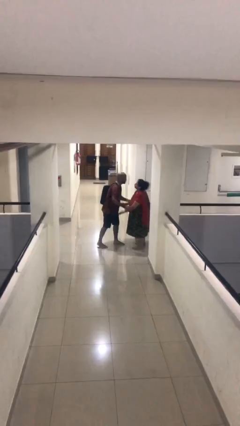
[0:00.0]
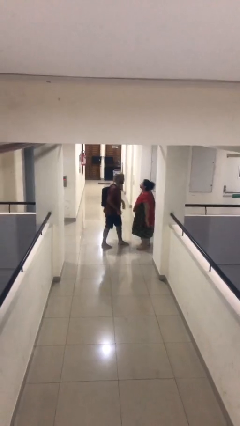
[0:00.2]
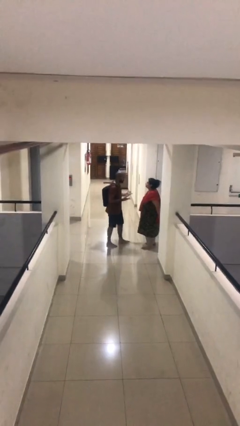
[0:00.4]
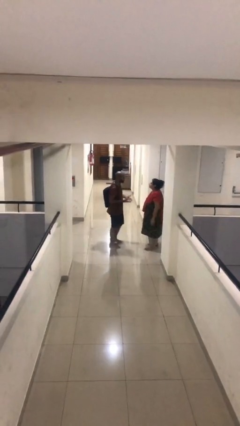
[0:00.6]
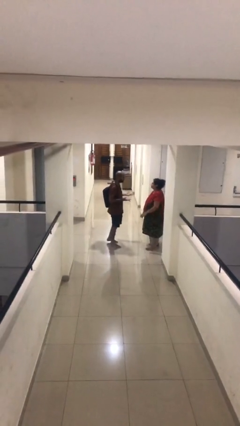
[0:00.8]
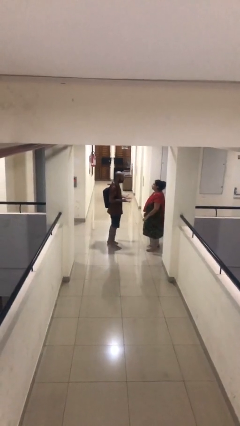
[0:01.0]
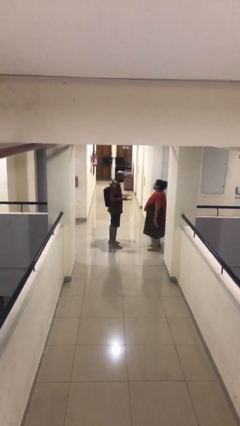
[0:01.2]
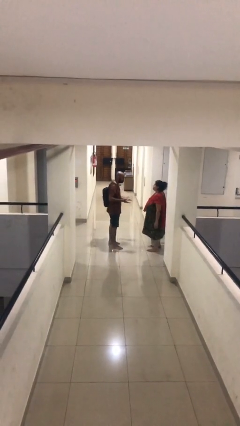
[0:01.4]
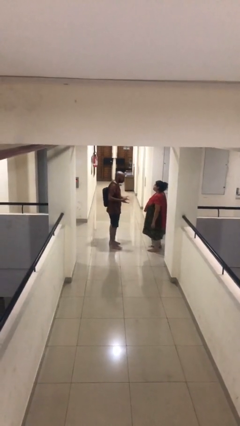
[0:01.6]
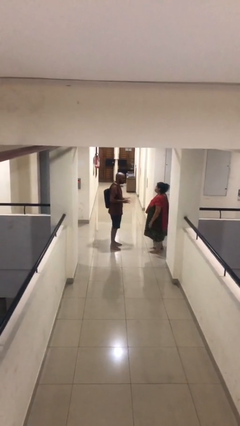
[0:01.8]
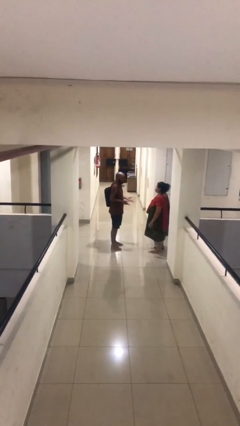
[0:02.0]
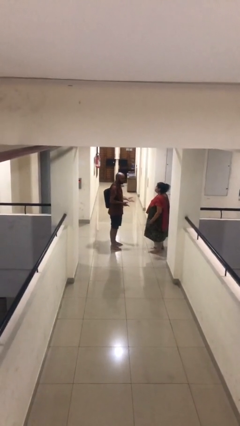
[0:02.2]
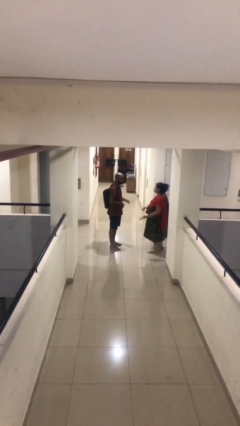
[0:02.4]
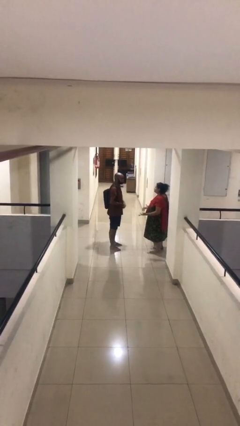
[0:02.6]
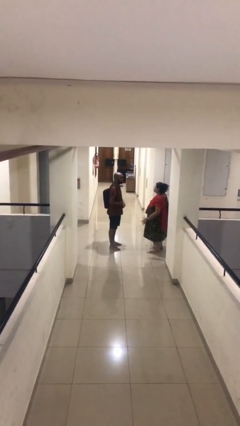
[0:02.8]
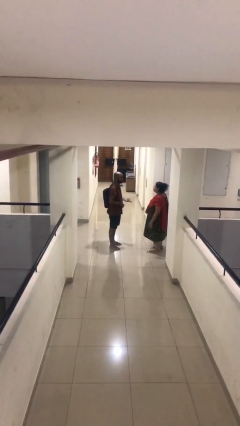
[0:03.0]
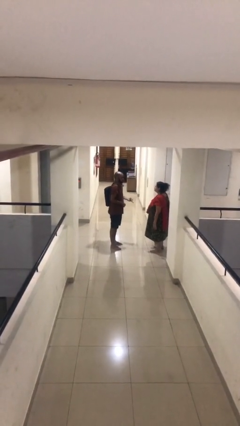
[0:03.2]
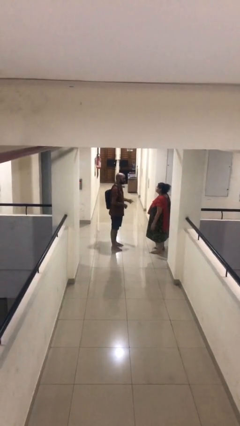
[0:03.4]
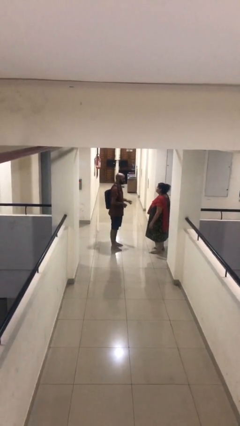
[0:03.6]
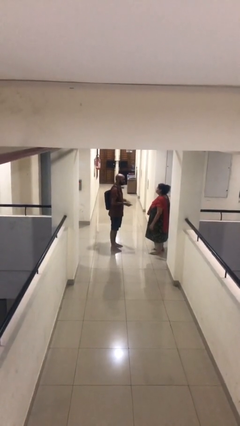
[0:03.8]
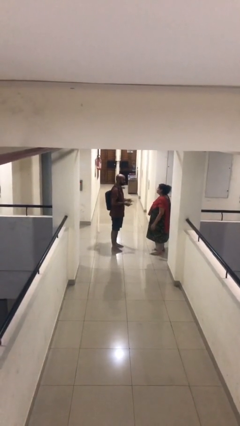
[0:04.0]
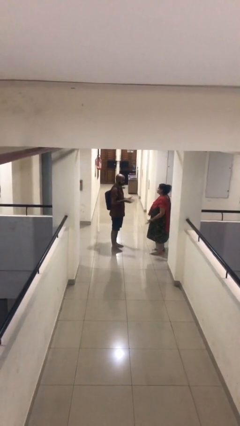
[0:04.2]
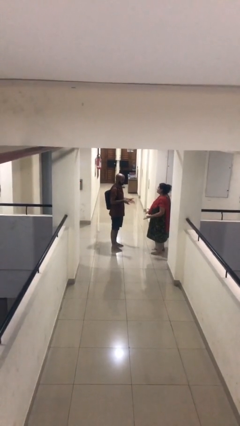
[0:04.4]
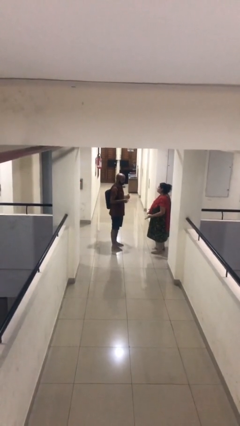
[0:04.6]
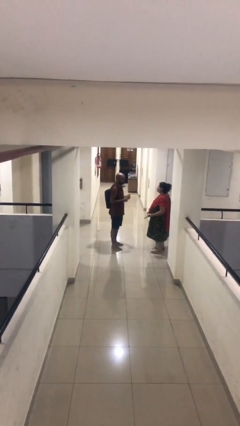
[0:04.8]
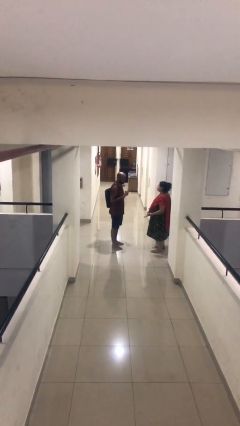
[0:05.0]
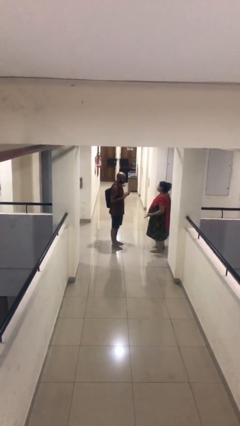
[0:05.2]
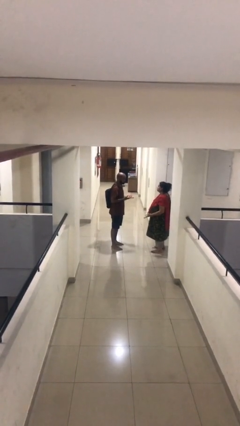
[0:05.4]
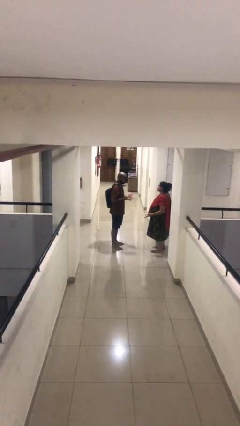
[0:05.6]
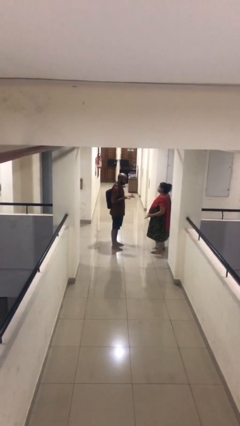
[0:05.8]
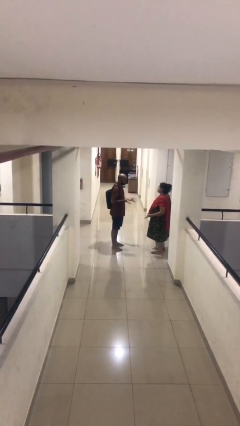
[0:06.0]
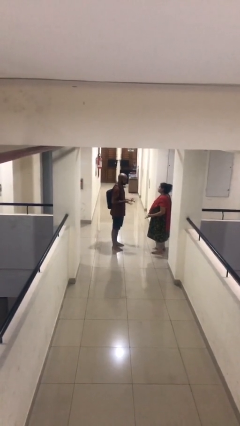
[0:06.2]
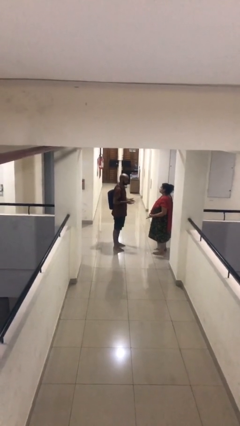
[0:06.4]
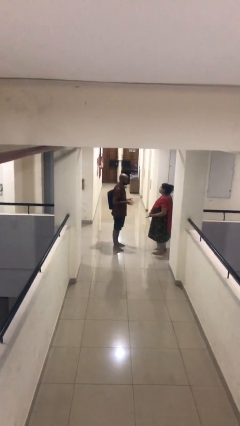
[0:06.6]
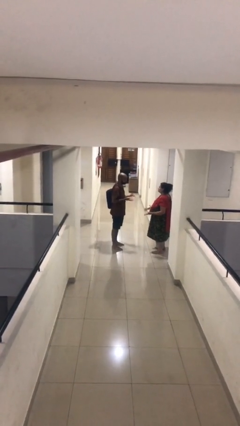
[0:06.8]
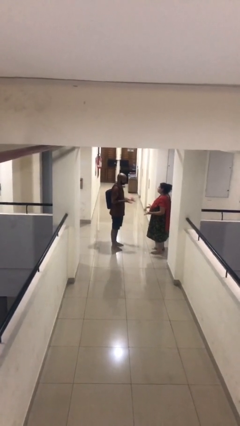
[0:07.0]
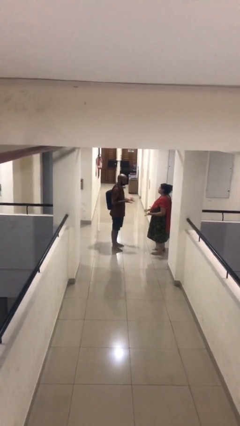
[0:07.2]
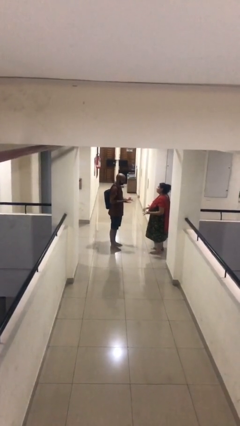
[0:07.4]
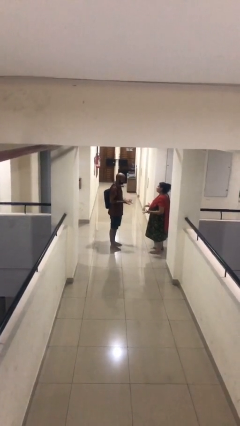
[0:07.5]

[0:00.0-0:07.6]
person talks to person

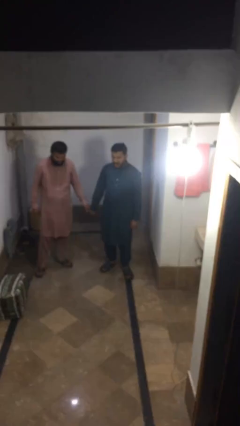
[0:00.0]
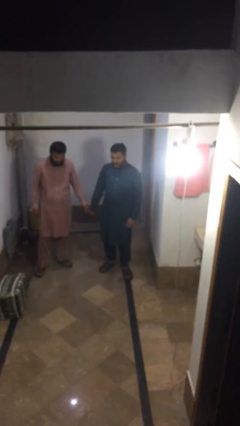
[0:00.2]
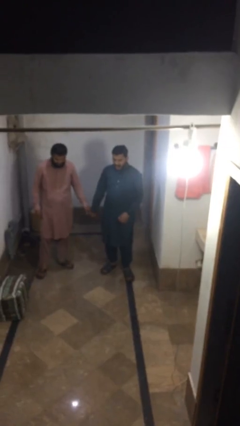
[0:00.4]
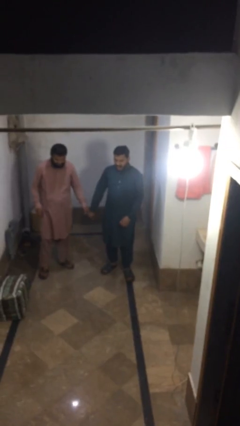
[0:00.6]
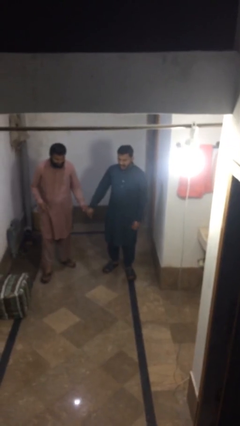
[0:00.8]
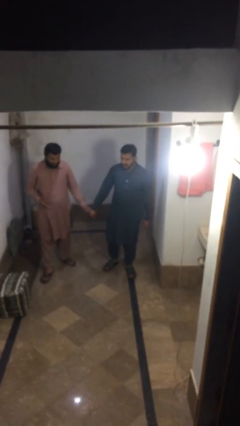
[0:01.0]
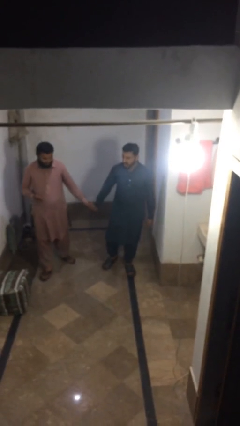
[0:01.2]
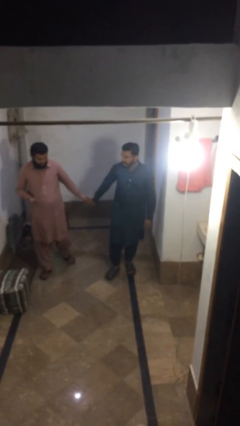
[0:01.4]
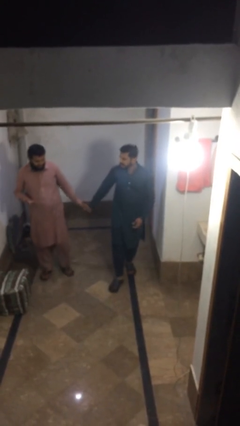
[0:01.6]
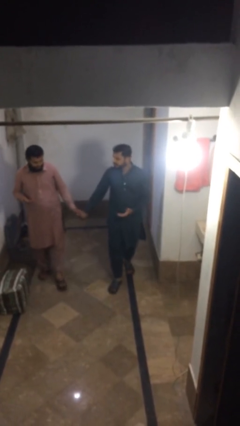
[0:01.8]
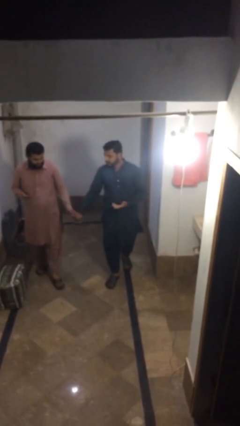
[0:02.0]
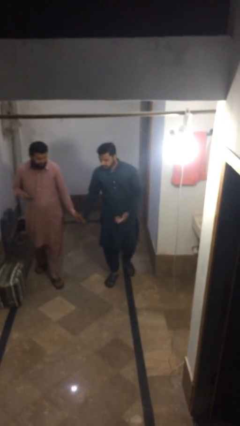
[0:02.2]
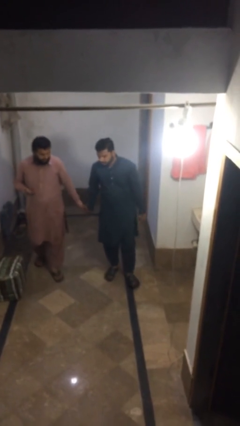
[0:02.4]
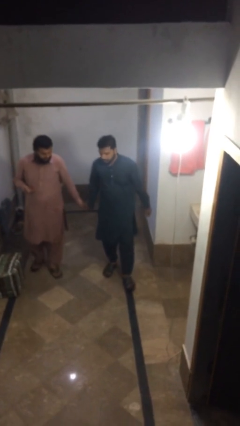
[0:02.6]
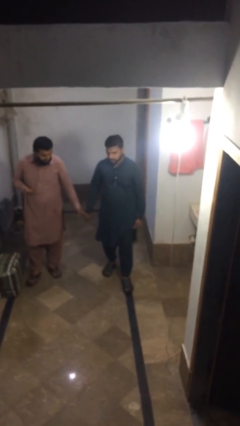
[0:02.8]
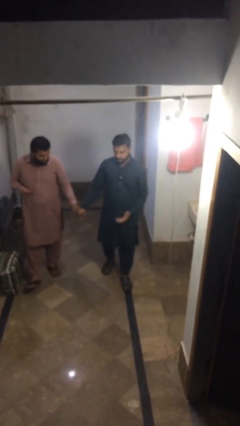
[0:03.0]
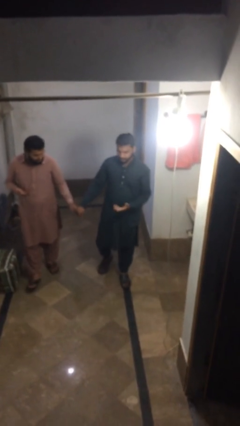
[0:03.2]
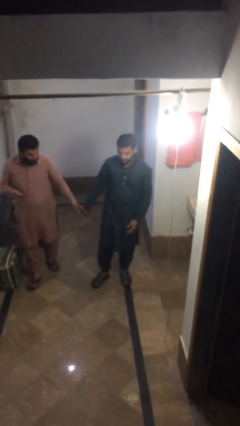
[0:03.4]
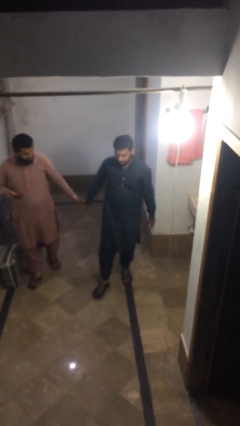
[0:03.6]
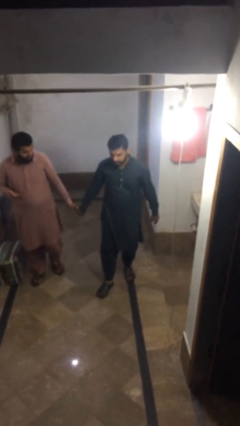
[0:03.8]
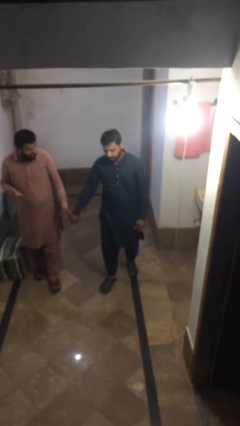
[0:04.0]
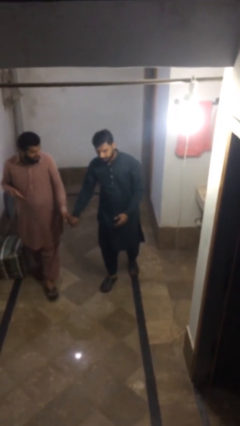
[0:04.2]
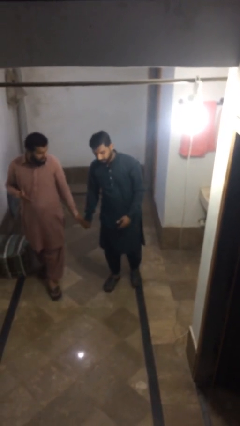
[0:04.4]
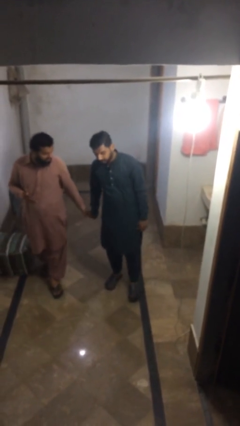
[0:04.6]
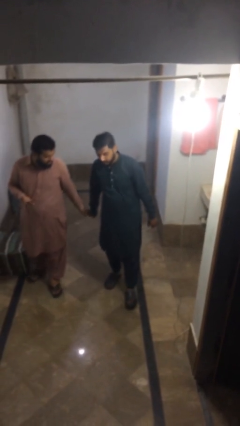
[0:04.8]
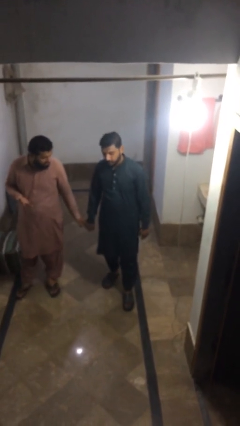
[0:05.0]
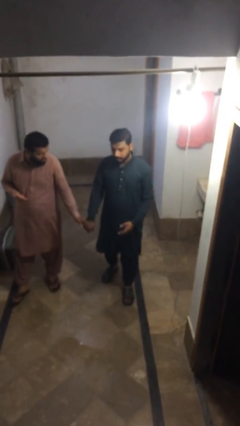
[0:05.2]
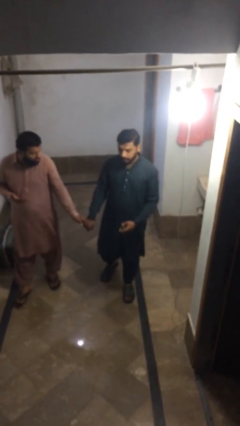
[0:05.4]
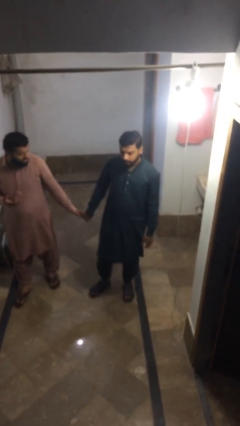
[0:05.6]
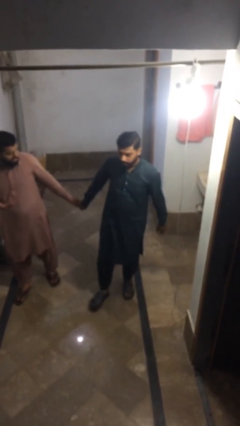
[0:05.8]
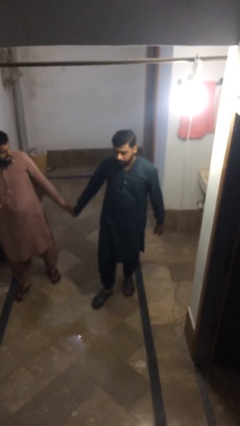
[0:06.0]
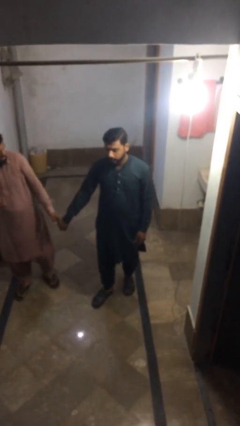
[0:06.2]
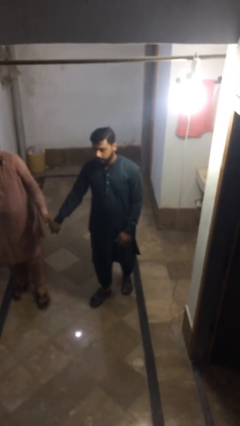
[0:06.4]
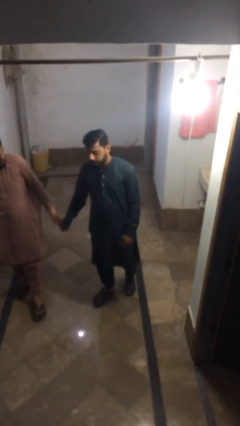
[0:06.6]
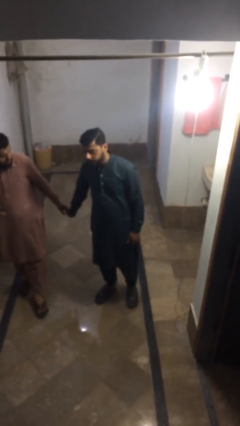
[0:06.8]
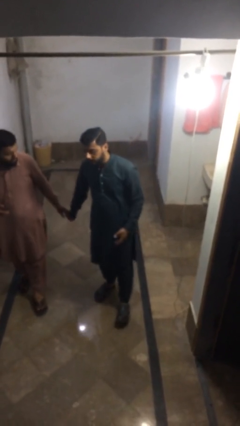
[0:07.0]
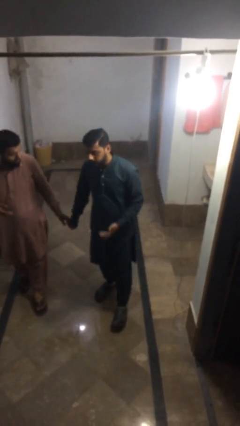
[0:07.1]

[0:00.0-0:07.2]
person holds hand

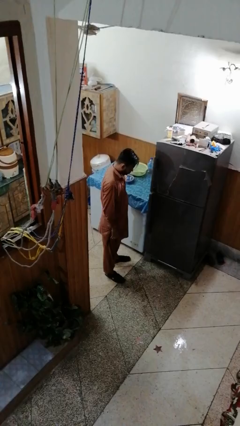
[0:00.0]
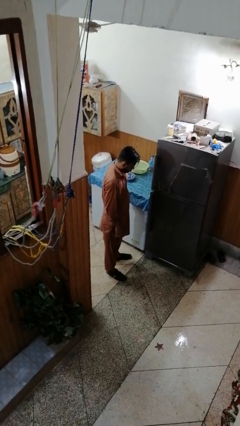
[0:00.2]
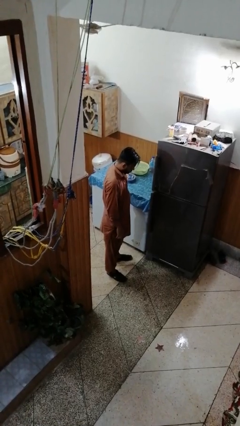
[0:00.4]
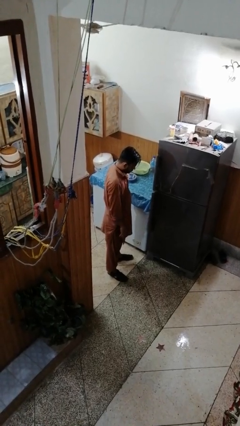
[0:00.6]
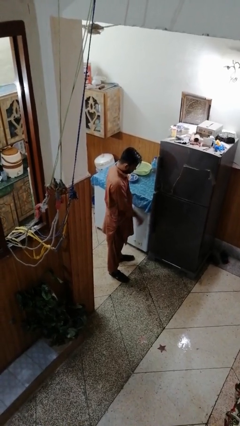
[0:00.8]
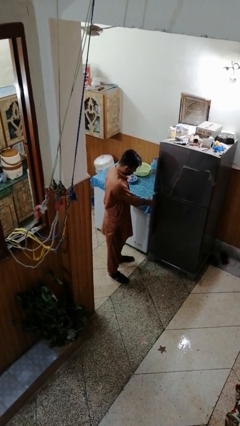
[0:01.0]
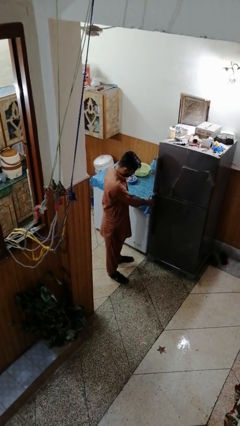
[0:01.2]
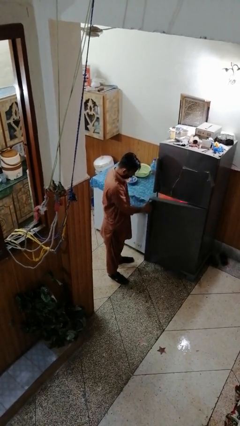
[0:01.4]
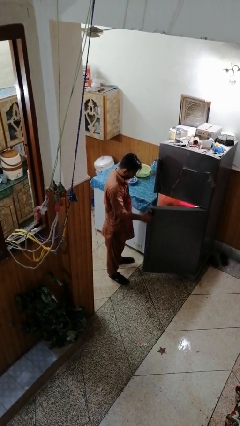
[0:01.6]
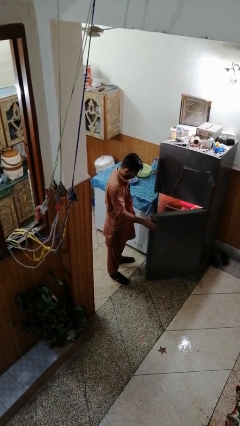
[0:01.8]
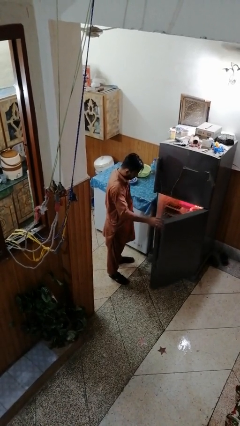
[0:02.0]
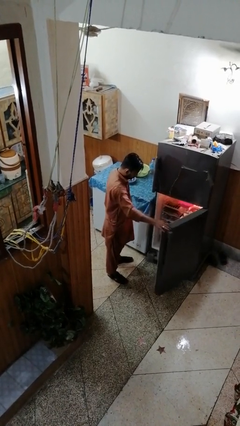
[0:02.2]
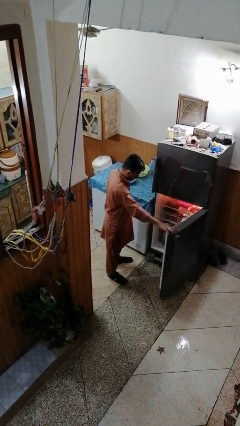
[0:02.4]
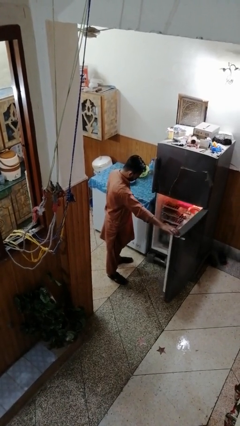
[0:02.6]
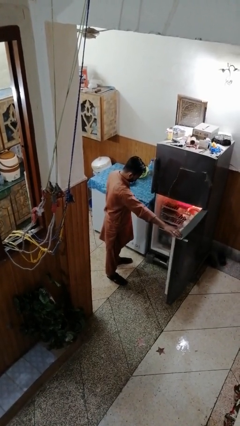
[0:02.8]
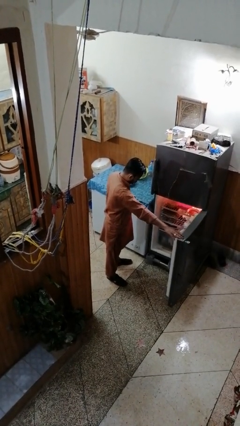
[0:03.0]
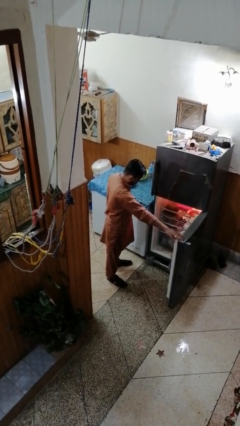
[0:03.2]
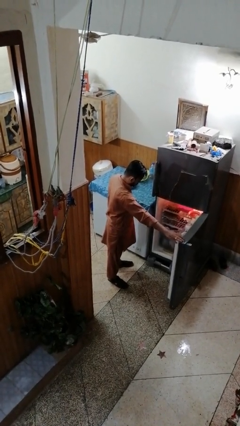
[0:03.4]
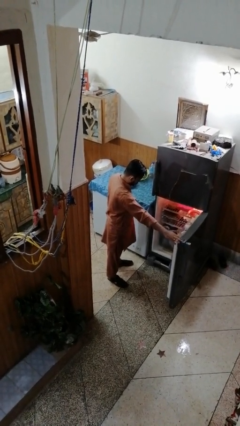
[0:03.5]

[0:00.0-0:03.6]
person opens refrigerator
